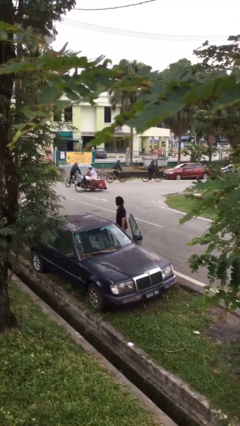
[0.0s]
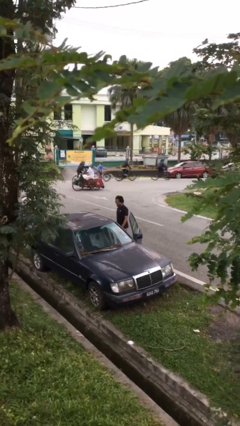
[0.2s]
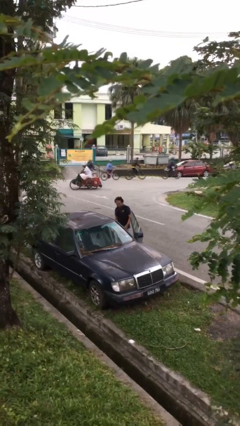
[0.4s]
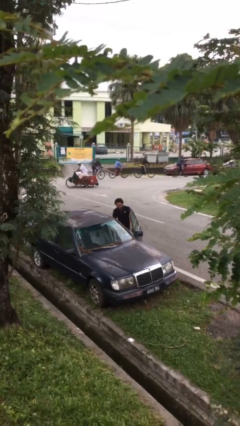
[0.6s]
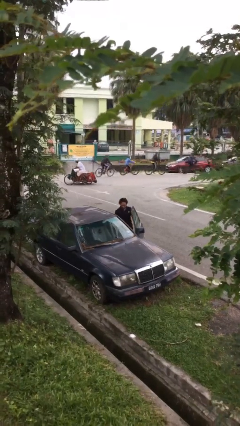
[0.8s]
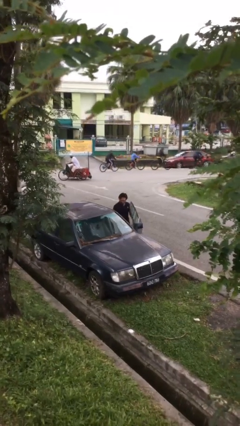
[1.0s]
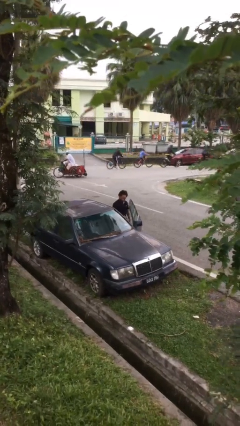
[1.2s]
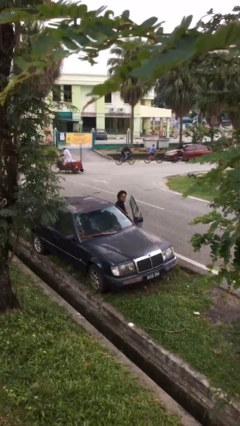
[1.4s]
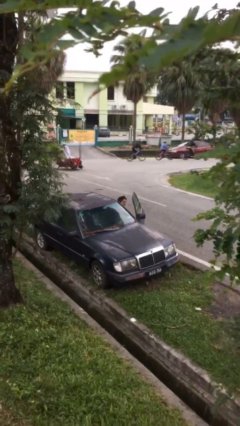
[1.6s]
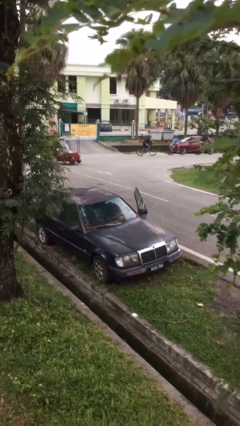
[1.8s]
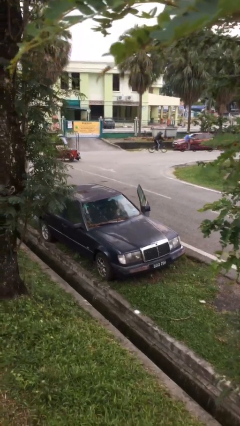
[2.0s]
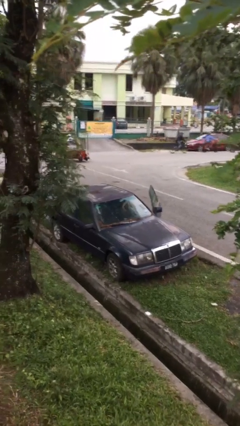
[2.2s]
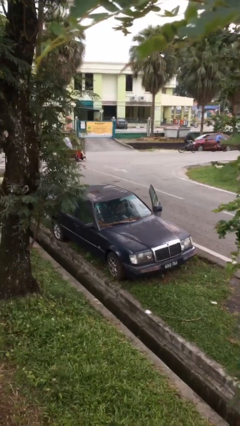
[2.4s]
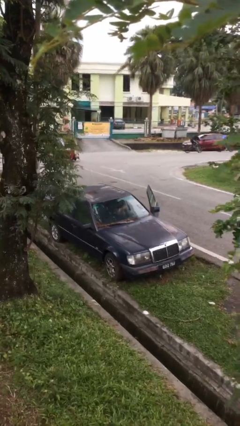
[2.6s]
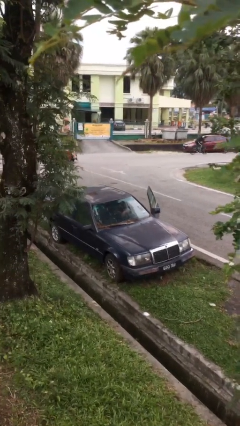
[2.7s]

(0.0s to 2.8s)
person enters car

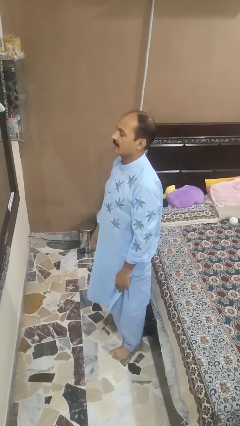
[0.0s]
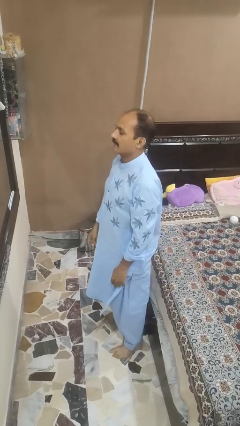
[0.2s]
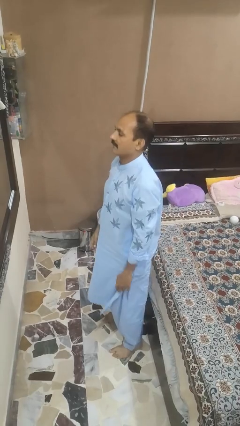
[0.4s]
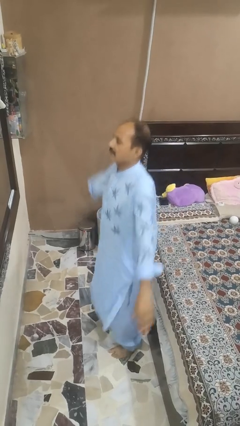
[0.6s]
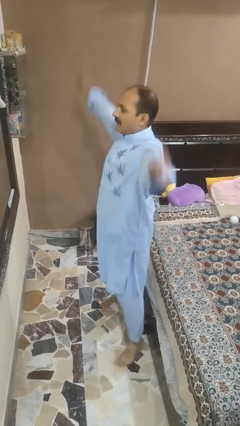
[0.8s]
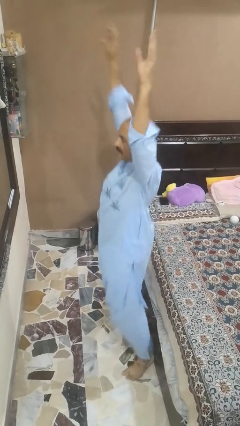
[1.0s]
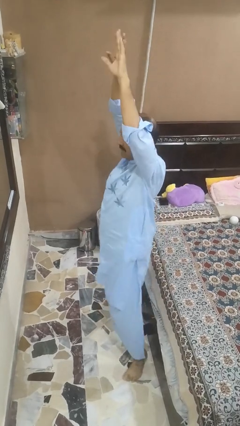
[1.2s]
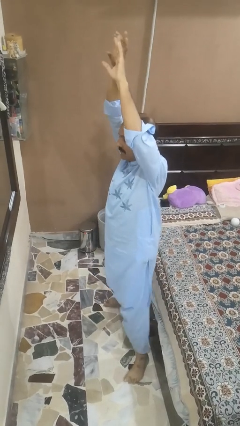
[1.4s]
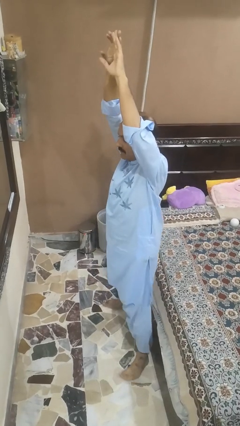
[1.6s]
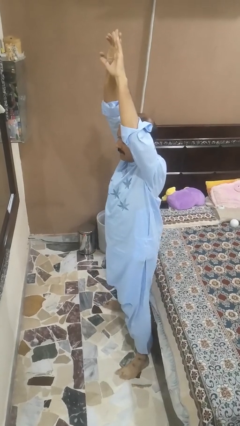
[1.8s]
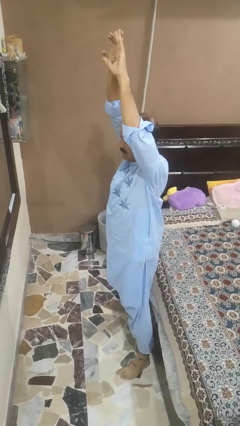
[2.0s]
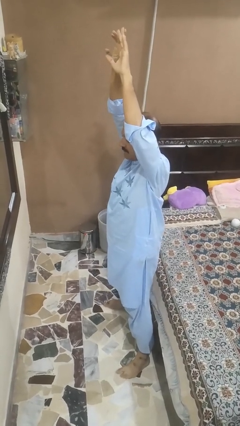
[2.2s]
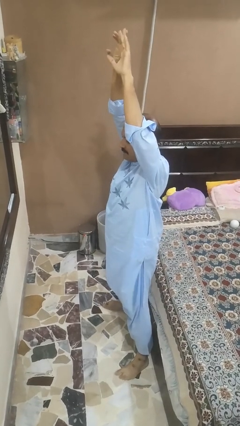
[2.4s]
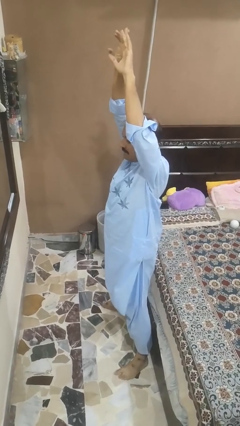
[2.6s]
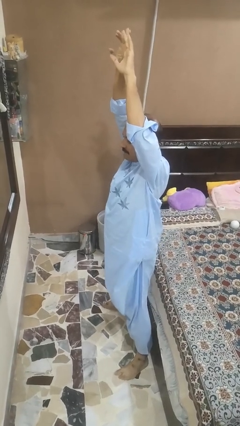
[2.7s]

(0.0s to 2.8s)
person exercises with jumping jacks

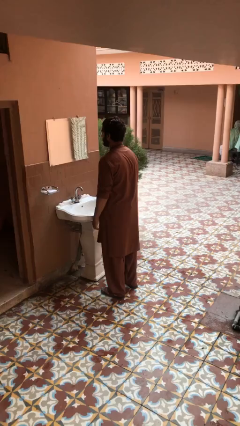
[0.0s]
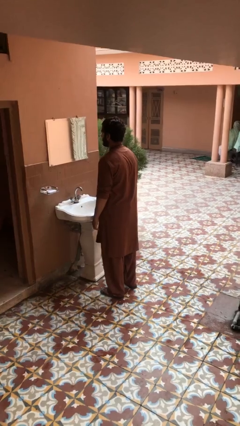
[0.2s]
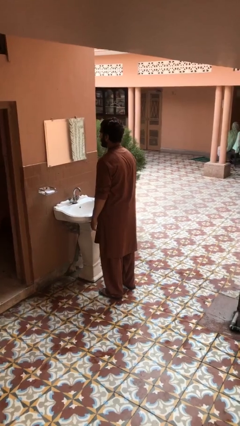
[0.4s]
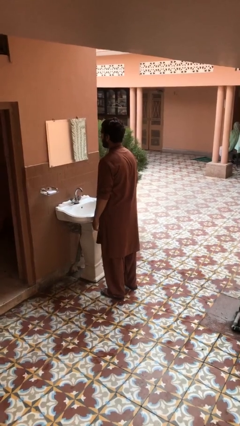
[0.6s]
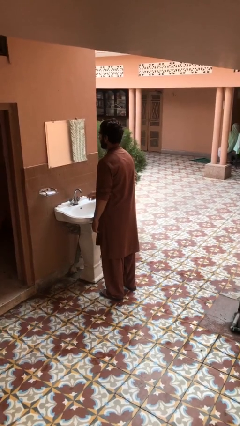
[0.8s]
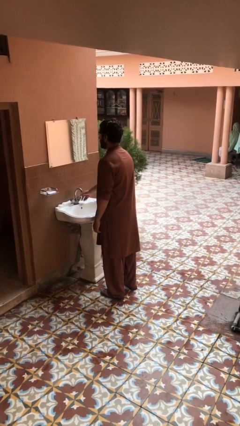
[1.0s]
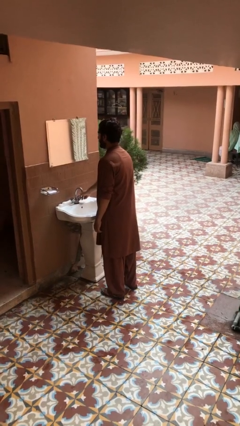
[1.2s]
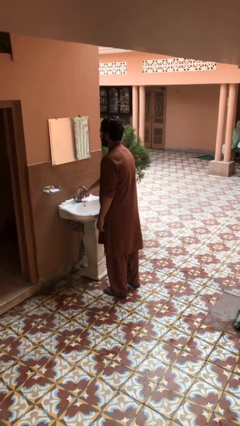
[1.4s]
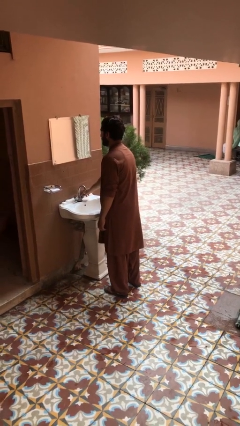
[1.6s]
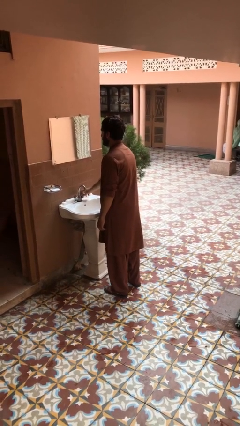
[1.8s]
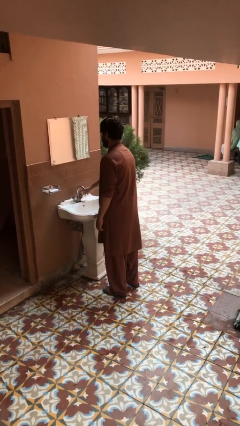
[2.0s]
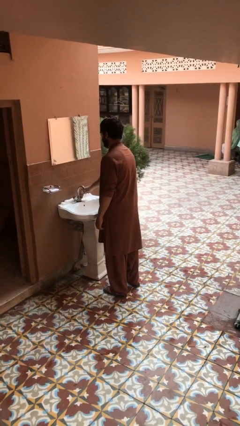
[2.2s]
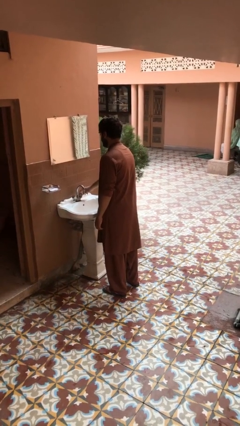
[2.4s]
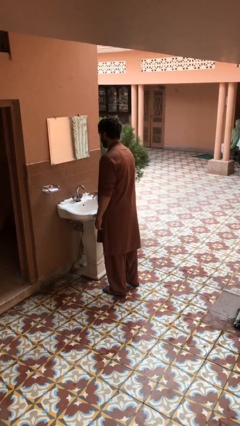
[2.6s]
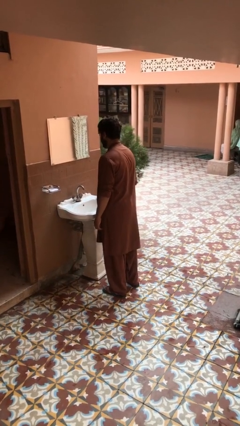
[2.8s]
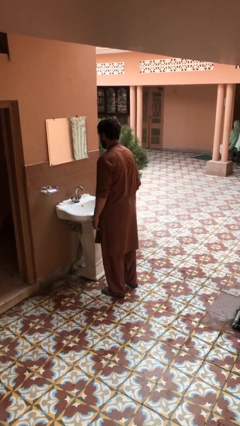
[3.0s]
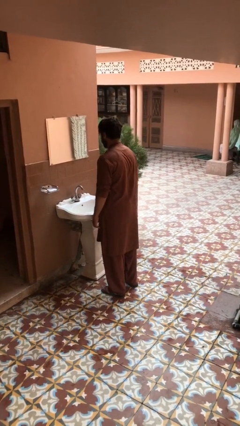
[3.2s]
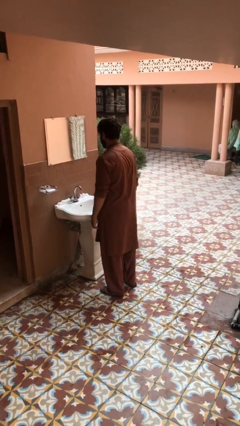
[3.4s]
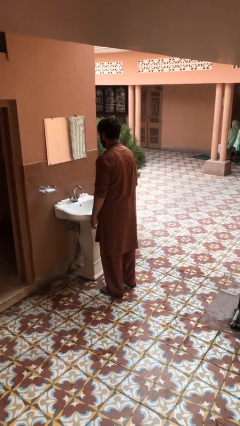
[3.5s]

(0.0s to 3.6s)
person turns on faucet

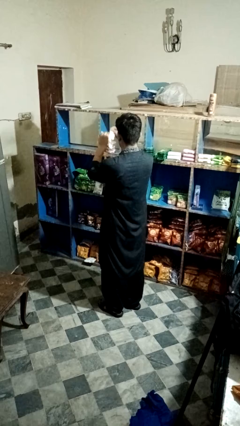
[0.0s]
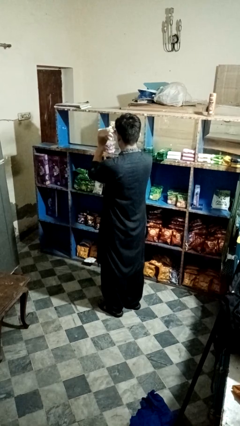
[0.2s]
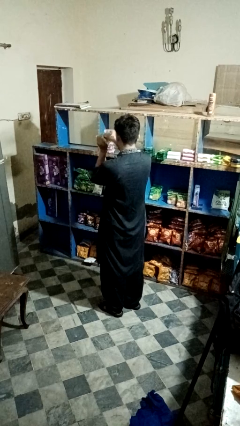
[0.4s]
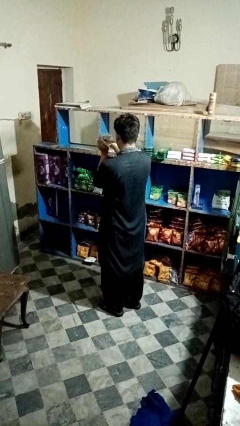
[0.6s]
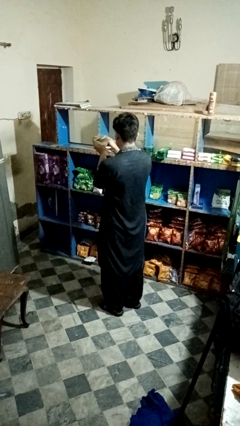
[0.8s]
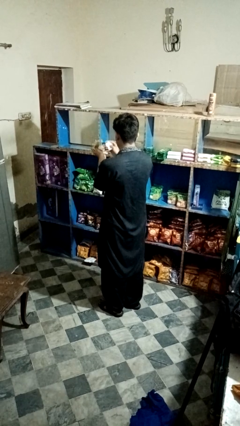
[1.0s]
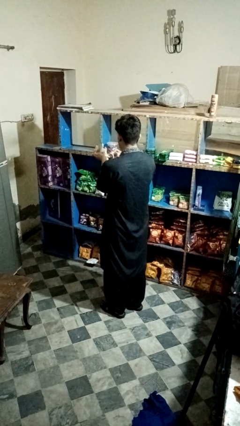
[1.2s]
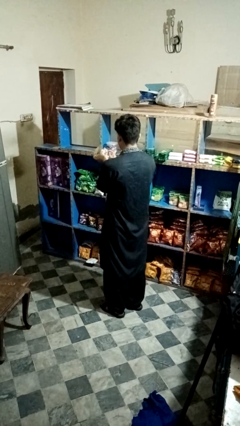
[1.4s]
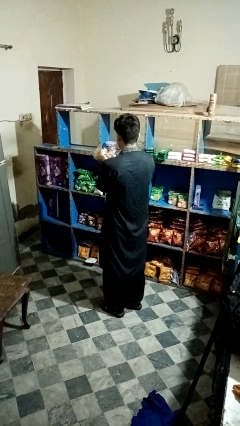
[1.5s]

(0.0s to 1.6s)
person tears paper

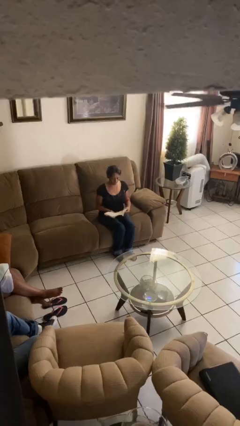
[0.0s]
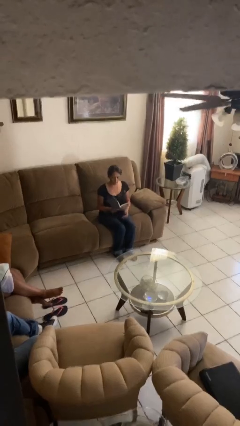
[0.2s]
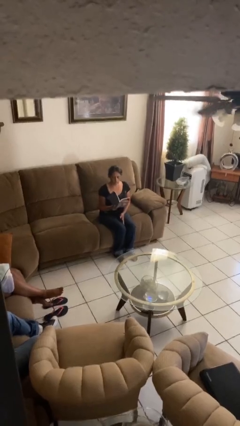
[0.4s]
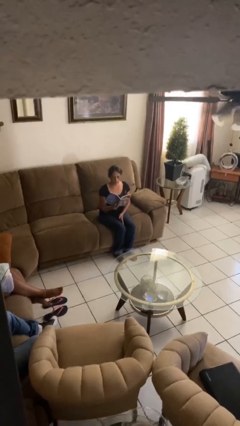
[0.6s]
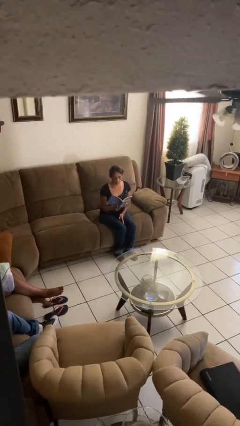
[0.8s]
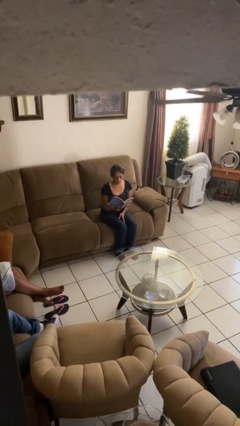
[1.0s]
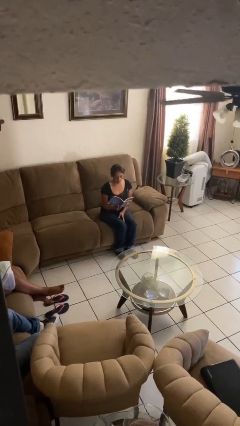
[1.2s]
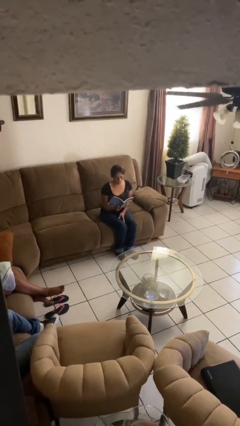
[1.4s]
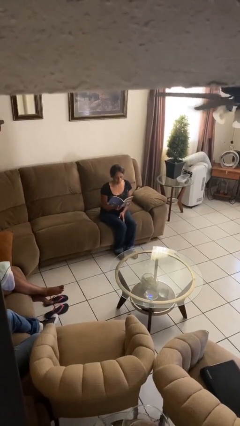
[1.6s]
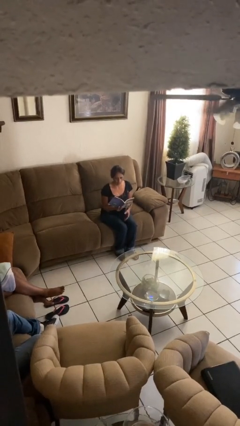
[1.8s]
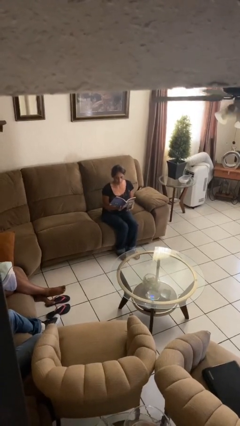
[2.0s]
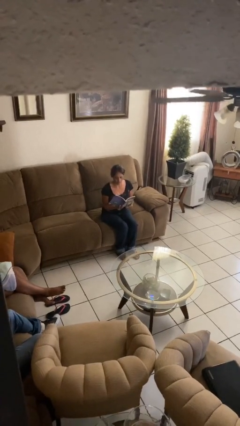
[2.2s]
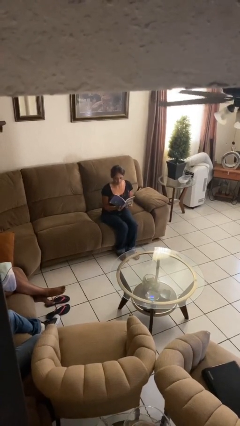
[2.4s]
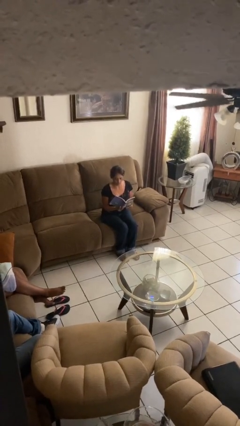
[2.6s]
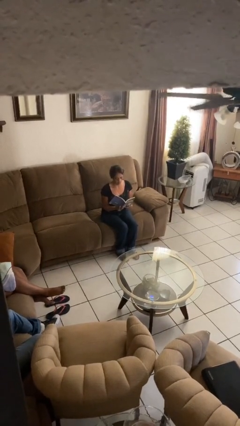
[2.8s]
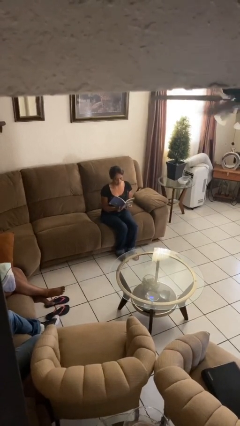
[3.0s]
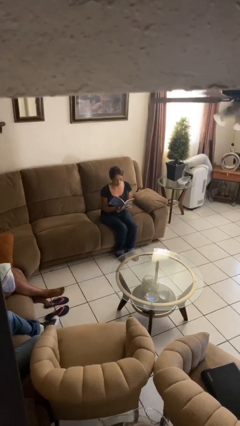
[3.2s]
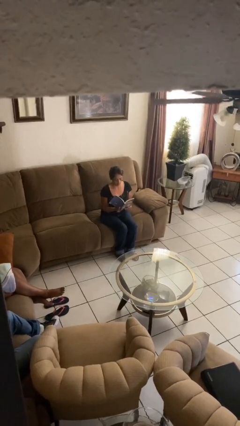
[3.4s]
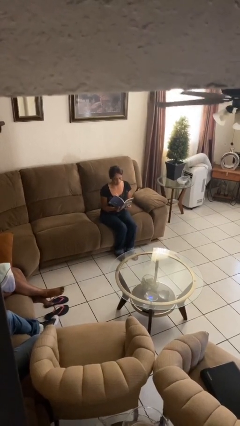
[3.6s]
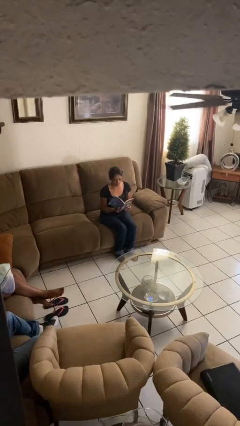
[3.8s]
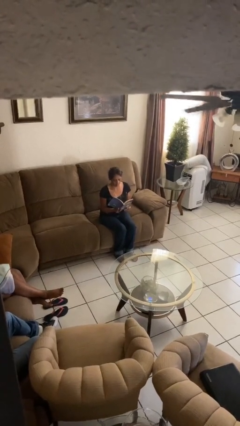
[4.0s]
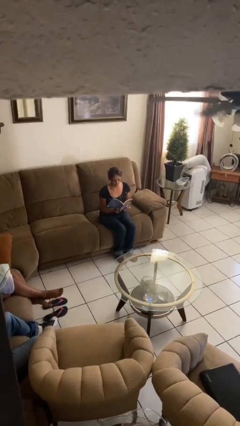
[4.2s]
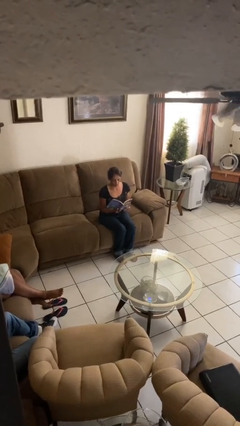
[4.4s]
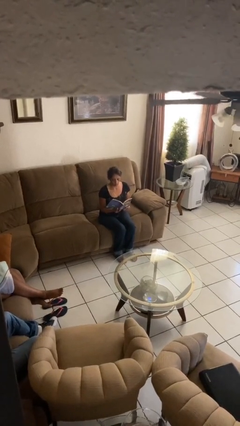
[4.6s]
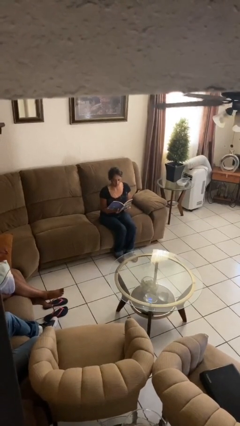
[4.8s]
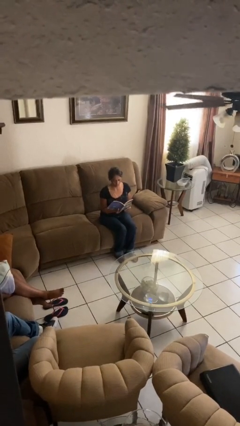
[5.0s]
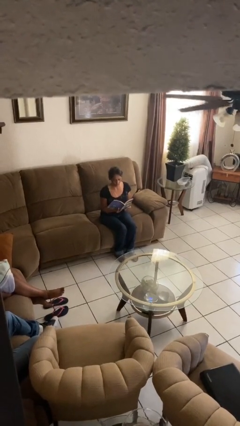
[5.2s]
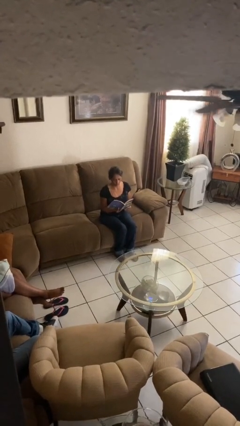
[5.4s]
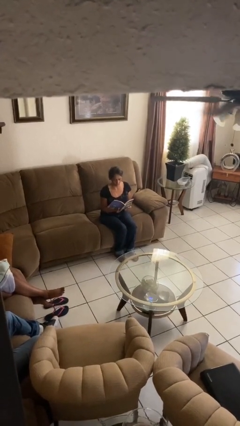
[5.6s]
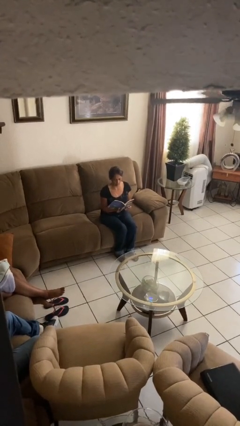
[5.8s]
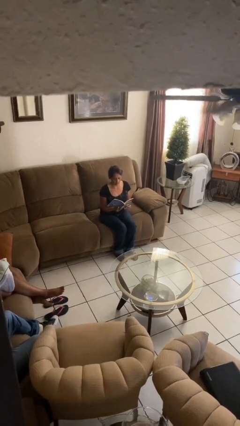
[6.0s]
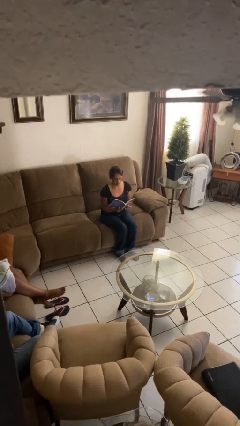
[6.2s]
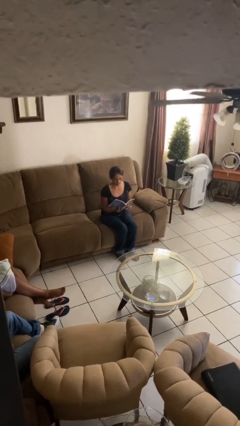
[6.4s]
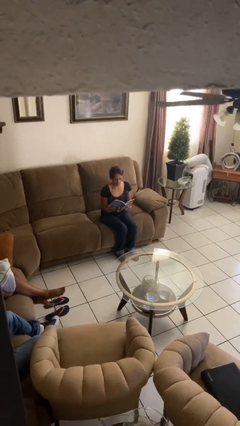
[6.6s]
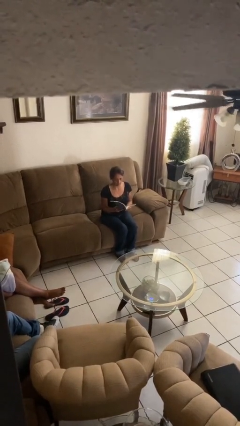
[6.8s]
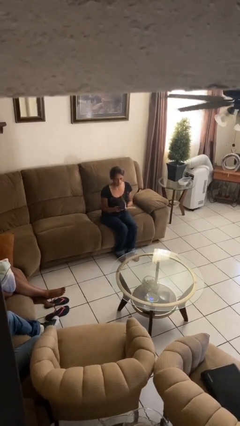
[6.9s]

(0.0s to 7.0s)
person reads document
